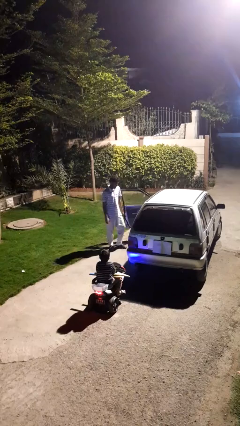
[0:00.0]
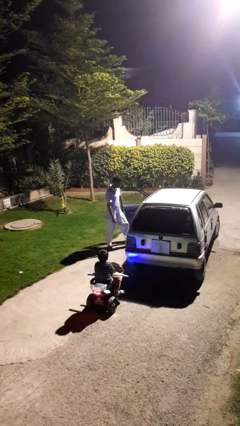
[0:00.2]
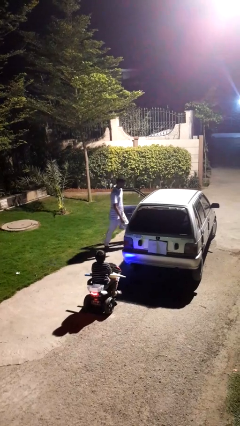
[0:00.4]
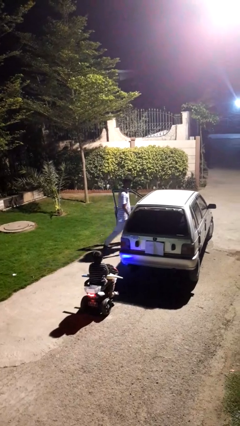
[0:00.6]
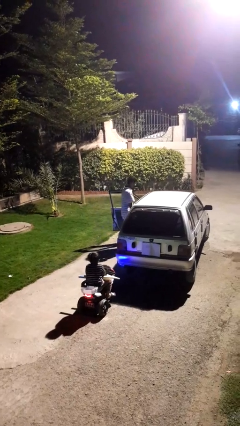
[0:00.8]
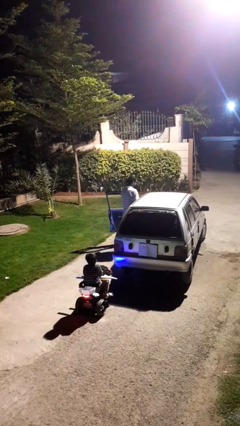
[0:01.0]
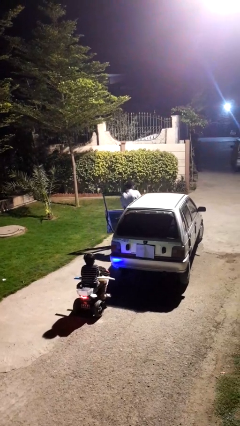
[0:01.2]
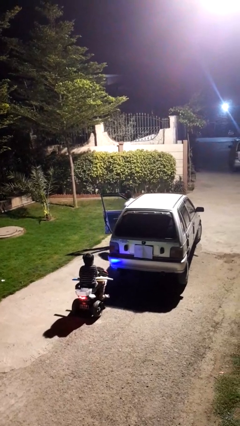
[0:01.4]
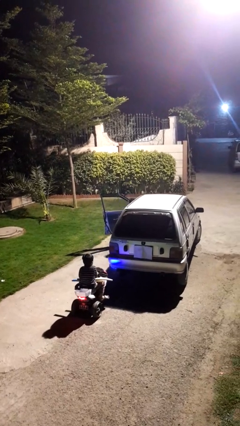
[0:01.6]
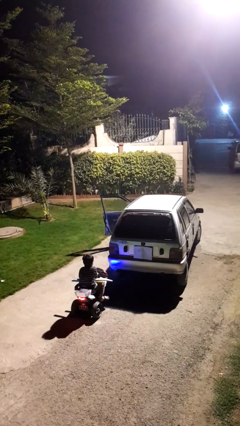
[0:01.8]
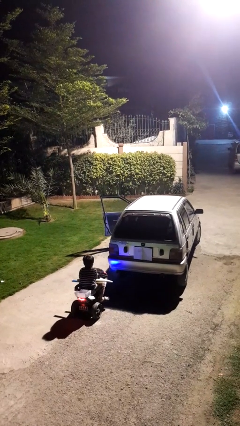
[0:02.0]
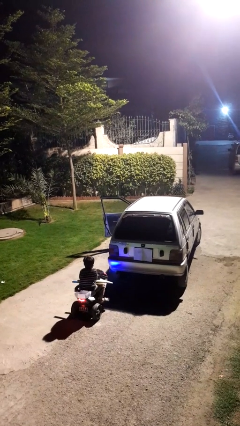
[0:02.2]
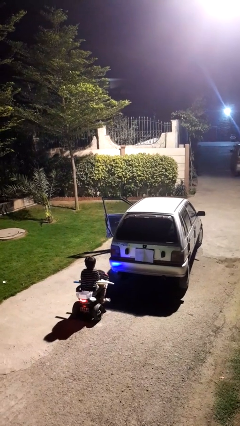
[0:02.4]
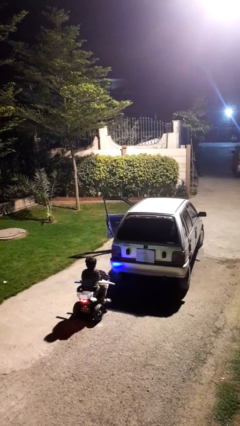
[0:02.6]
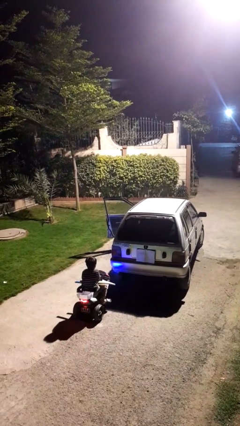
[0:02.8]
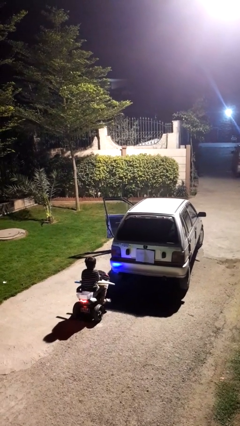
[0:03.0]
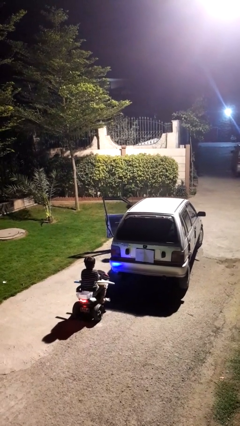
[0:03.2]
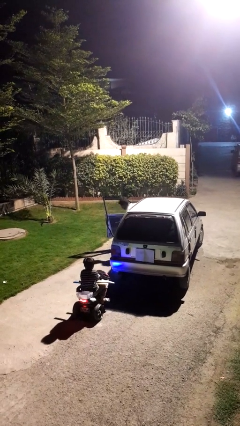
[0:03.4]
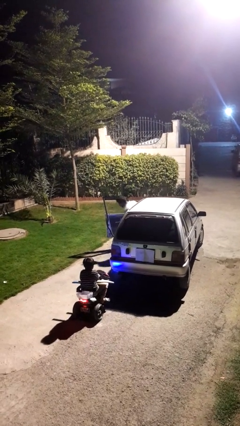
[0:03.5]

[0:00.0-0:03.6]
person enters car

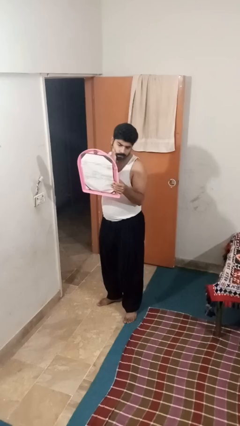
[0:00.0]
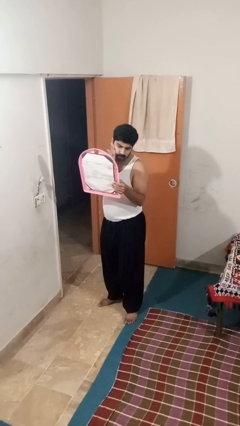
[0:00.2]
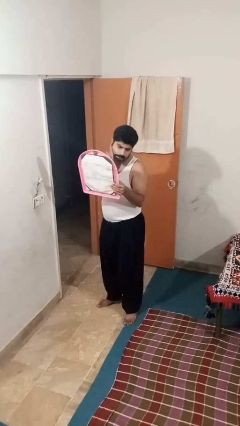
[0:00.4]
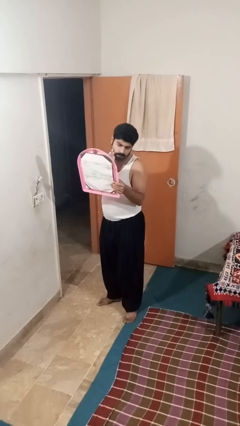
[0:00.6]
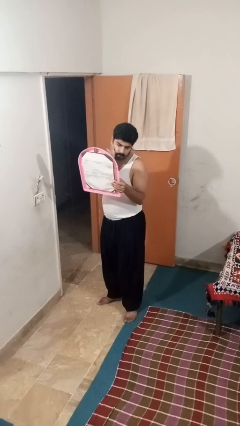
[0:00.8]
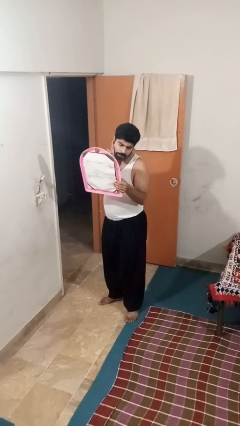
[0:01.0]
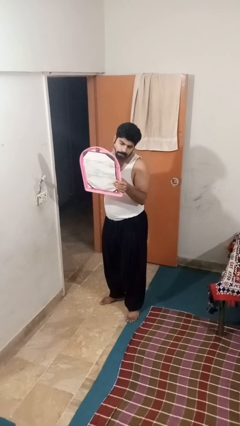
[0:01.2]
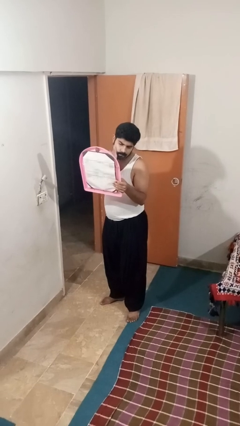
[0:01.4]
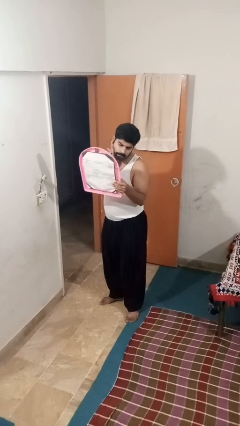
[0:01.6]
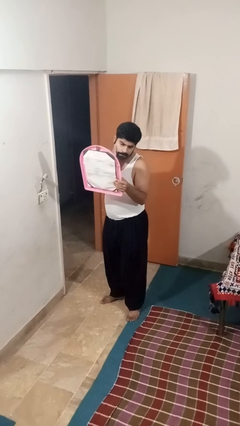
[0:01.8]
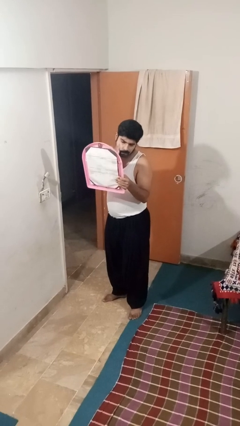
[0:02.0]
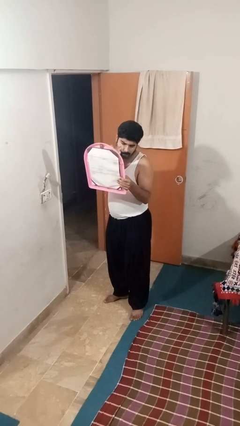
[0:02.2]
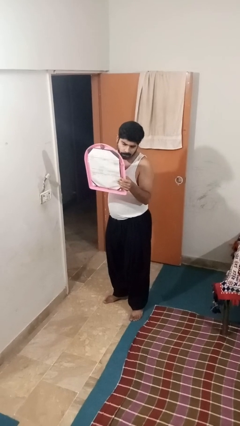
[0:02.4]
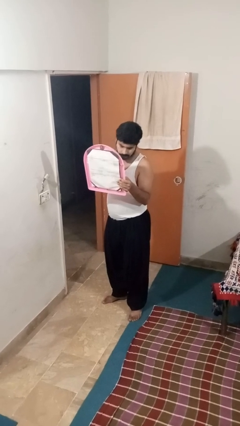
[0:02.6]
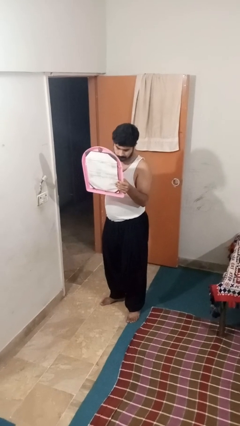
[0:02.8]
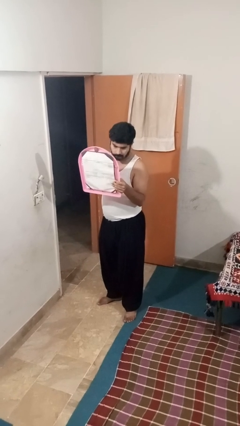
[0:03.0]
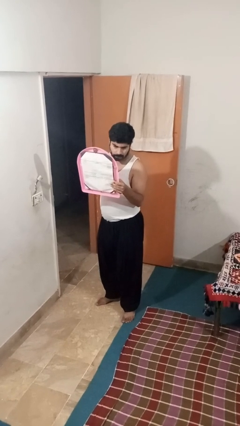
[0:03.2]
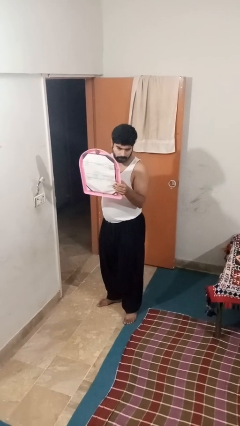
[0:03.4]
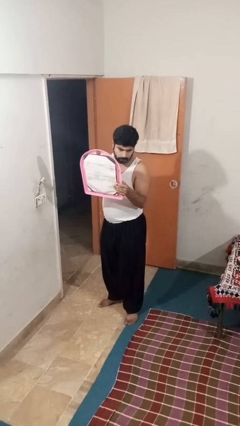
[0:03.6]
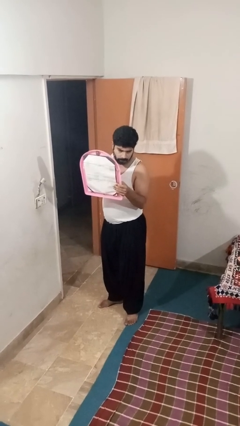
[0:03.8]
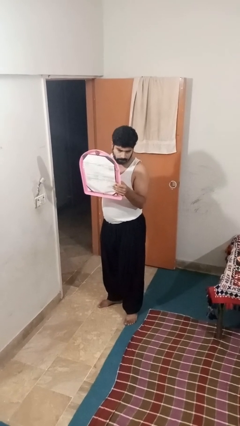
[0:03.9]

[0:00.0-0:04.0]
person applies shaving cream

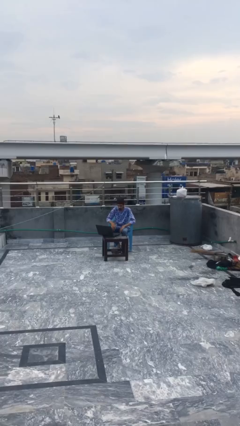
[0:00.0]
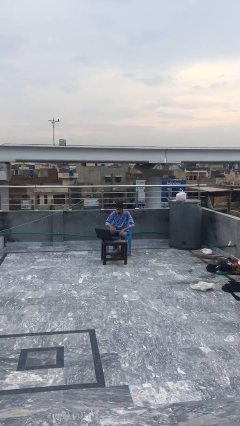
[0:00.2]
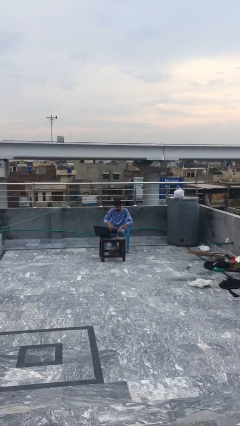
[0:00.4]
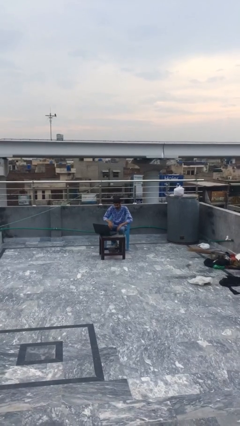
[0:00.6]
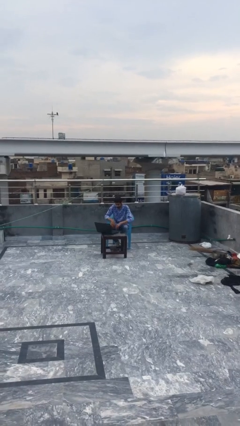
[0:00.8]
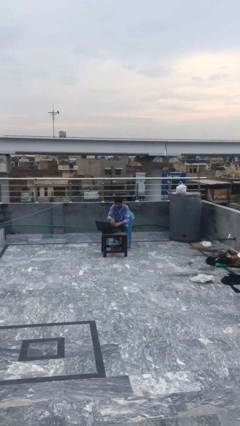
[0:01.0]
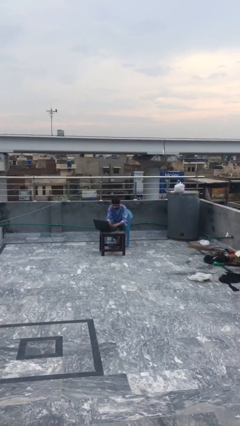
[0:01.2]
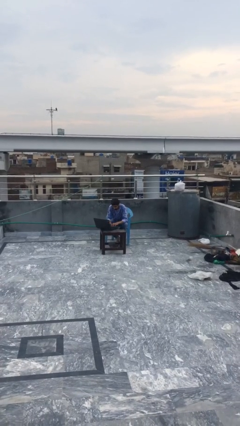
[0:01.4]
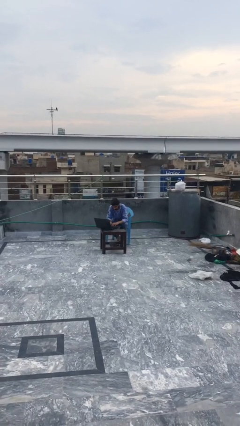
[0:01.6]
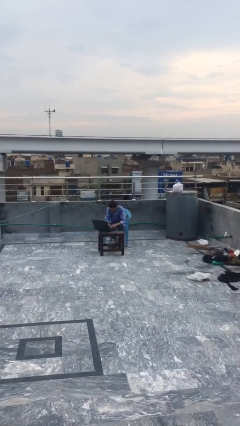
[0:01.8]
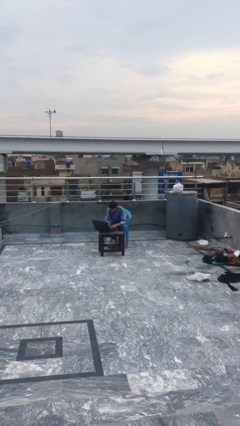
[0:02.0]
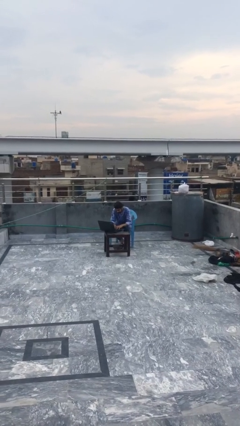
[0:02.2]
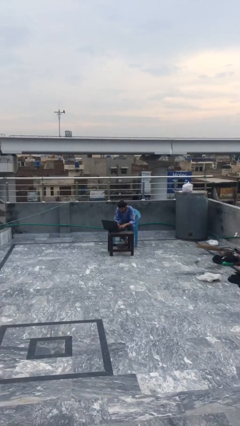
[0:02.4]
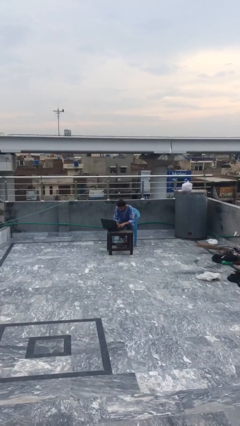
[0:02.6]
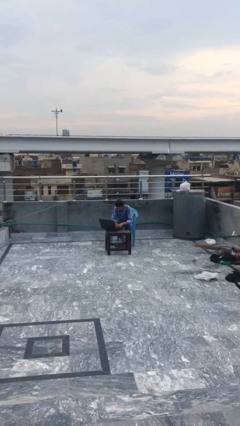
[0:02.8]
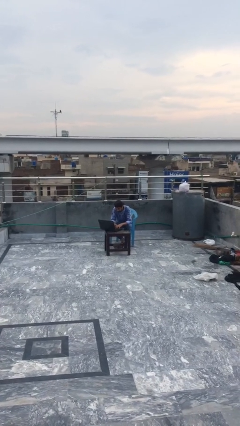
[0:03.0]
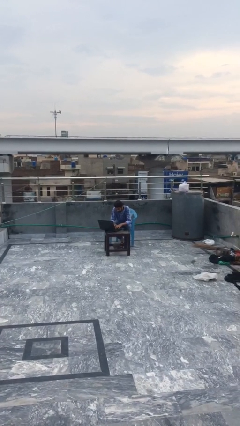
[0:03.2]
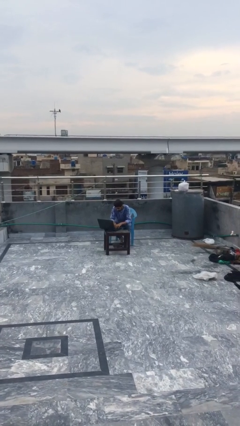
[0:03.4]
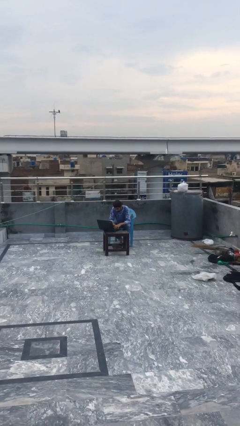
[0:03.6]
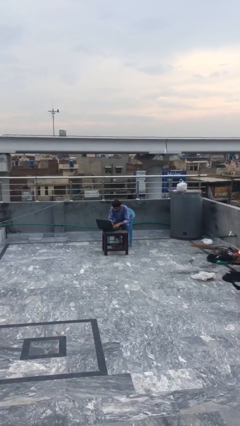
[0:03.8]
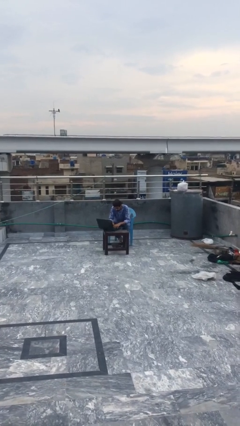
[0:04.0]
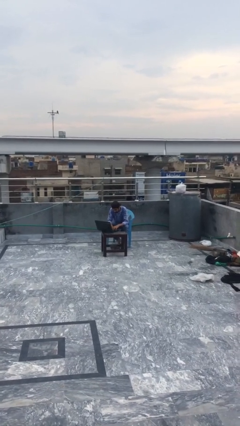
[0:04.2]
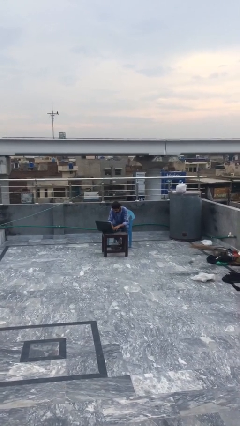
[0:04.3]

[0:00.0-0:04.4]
person interacts with laptop

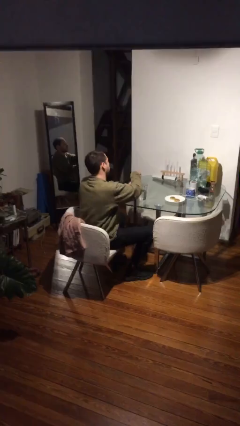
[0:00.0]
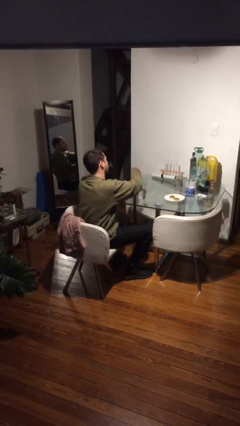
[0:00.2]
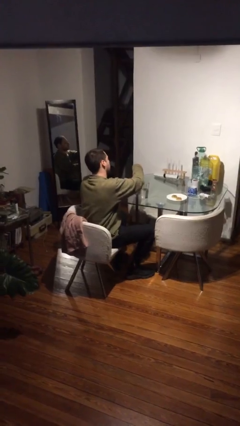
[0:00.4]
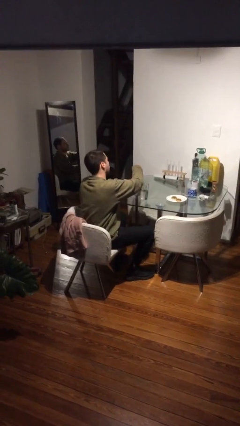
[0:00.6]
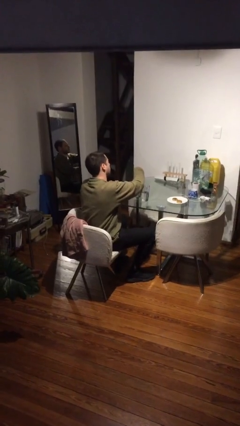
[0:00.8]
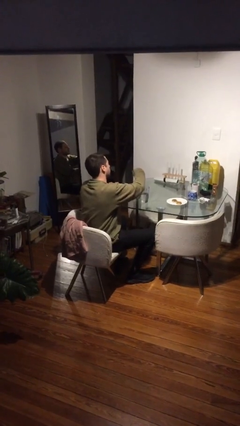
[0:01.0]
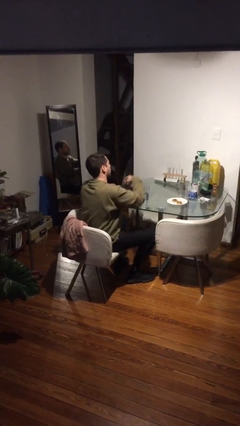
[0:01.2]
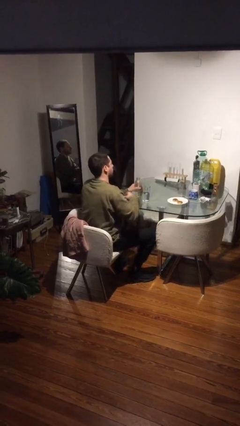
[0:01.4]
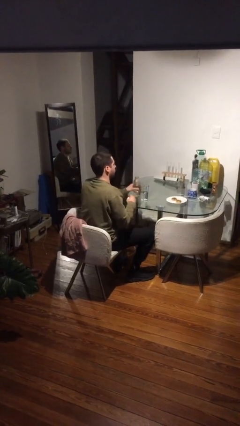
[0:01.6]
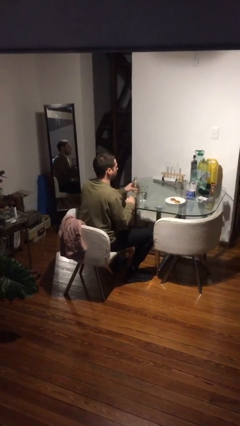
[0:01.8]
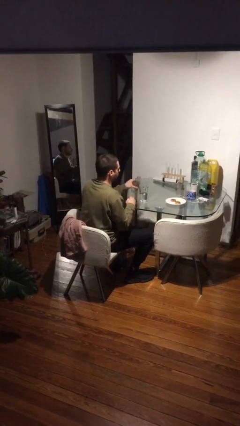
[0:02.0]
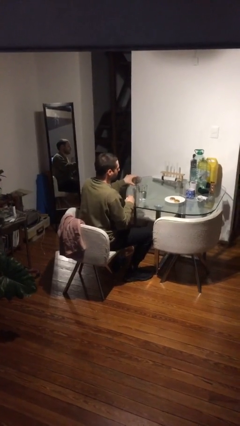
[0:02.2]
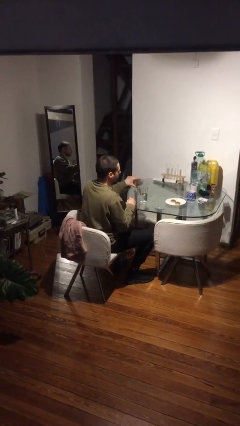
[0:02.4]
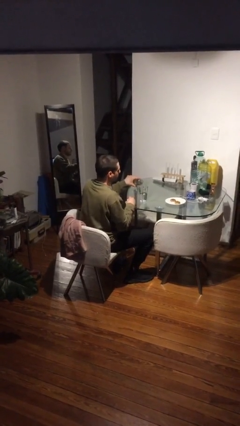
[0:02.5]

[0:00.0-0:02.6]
person unscrews lid from bottle

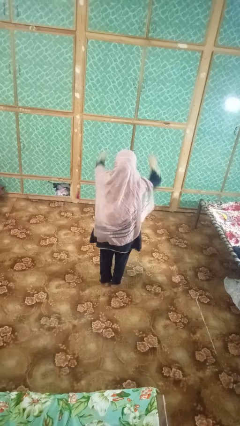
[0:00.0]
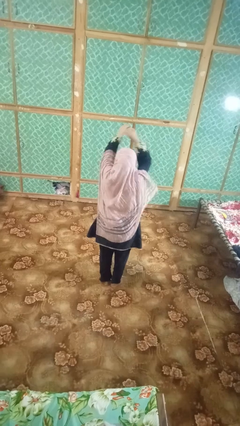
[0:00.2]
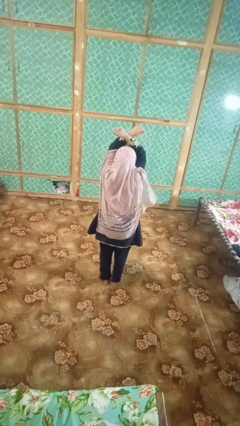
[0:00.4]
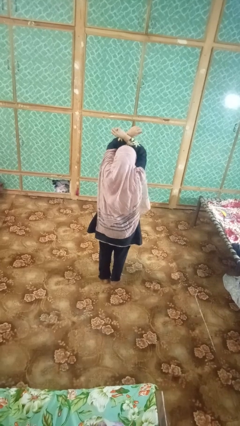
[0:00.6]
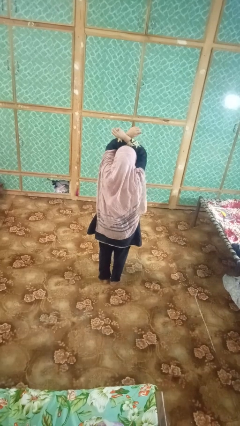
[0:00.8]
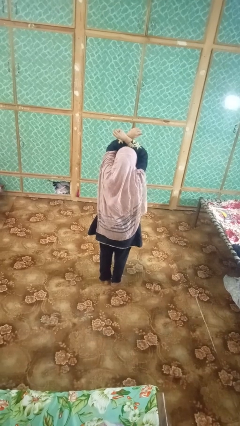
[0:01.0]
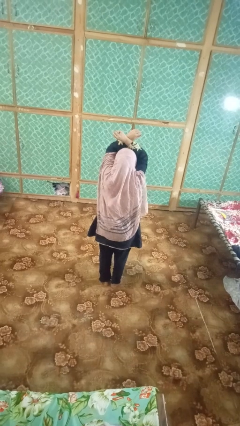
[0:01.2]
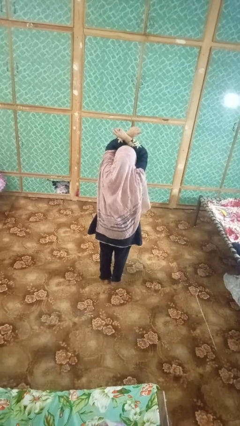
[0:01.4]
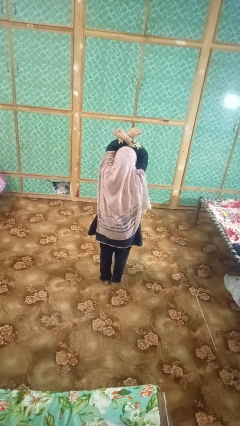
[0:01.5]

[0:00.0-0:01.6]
person gestures arms x

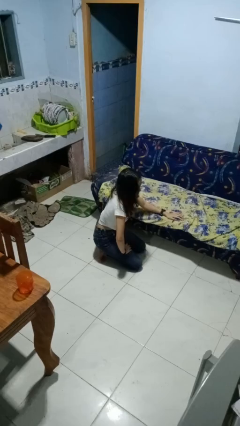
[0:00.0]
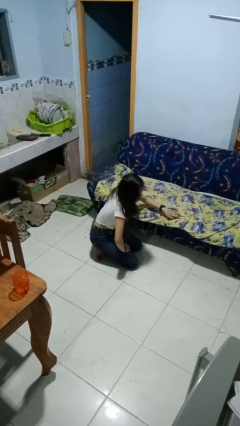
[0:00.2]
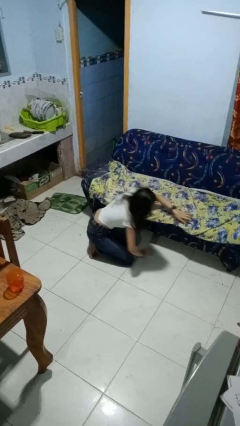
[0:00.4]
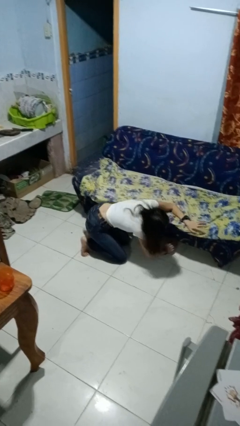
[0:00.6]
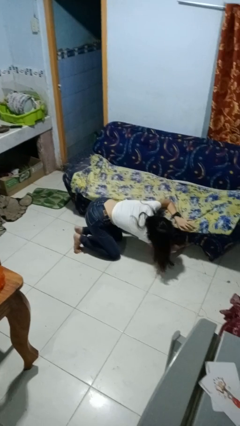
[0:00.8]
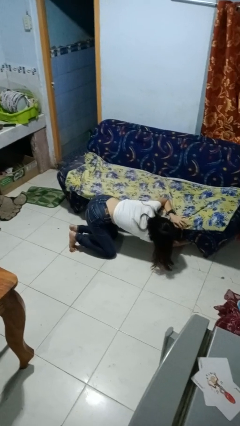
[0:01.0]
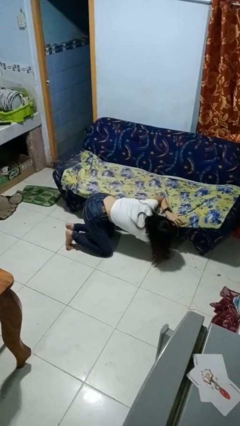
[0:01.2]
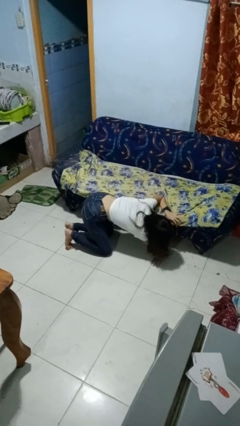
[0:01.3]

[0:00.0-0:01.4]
person searches under couch
